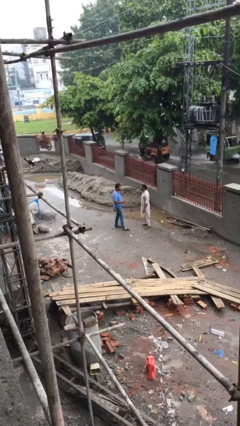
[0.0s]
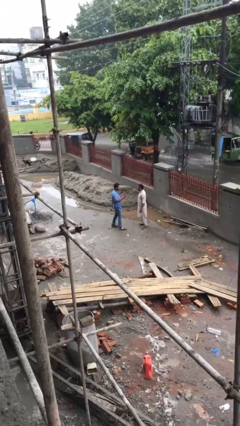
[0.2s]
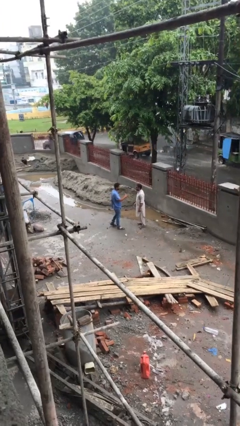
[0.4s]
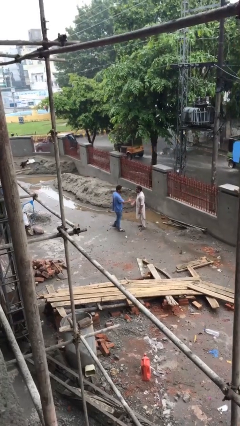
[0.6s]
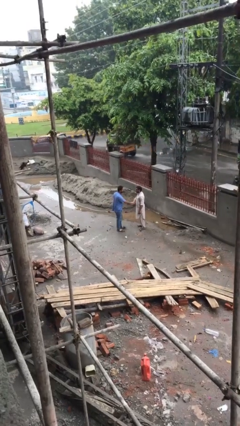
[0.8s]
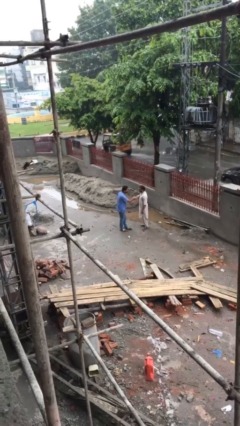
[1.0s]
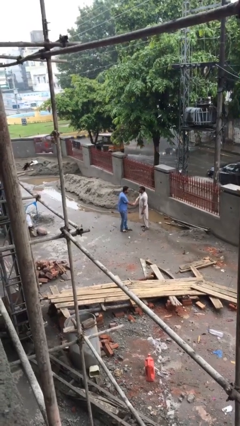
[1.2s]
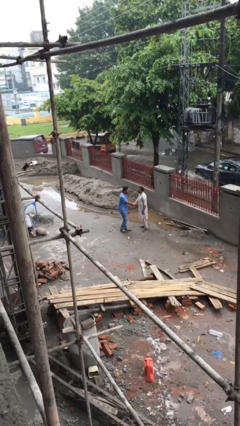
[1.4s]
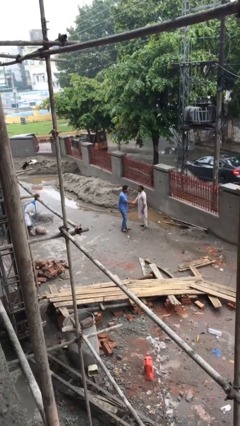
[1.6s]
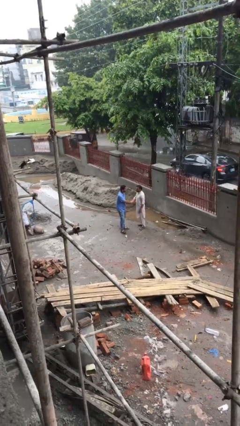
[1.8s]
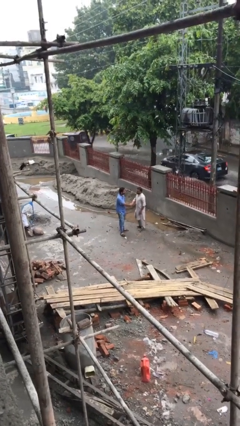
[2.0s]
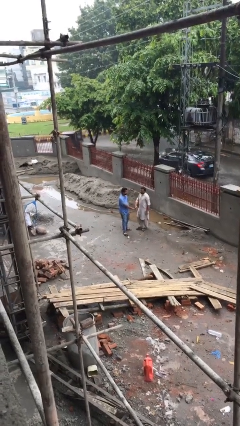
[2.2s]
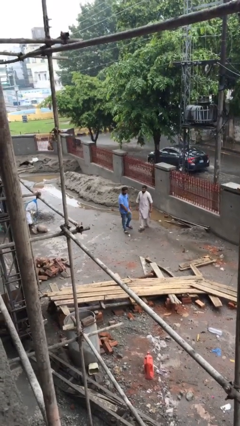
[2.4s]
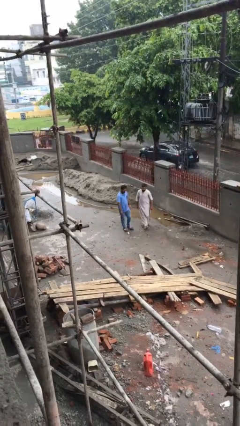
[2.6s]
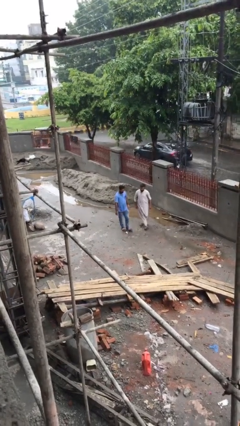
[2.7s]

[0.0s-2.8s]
person shakes hand

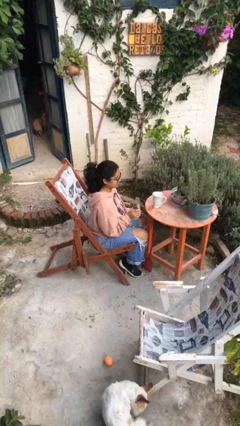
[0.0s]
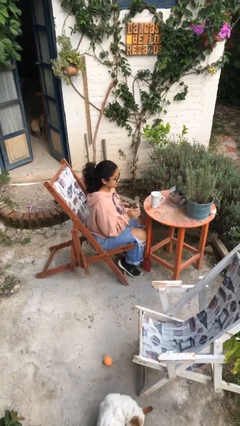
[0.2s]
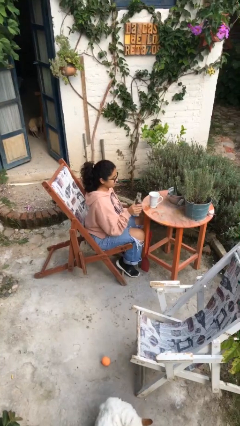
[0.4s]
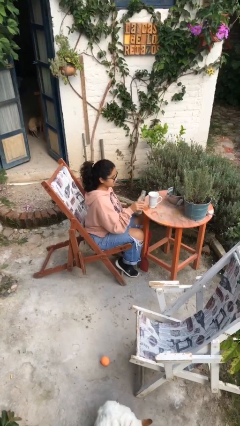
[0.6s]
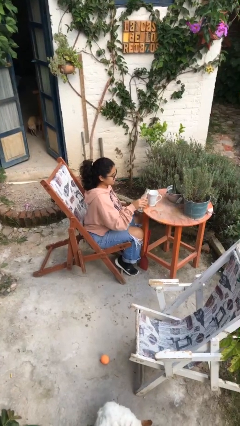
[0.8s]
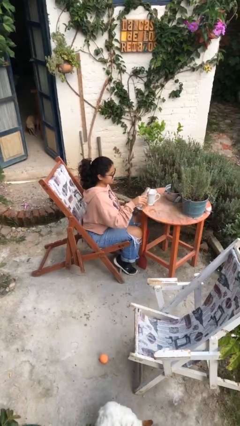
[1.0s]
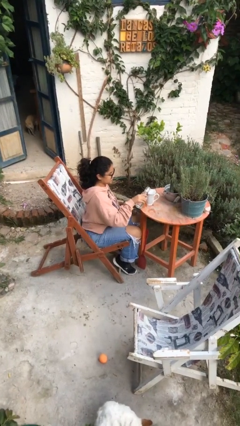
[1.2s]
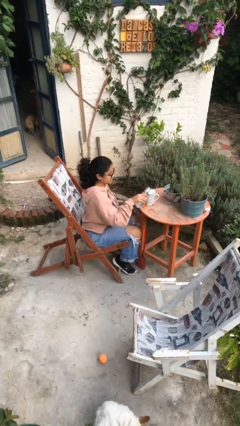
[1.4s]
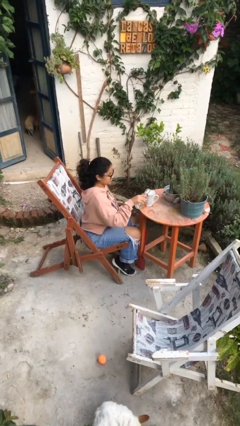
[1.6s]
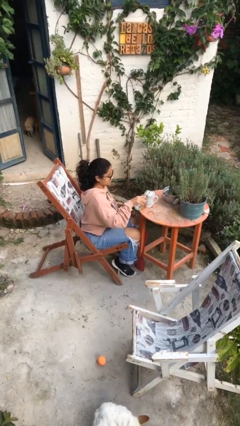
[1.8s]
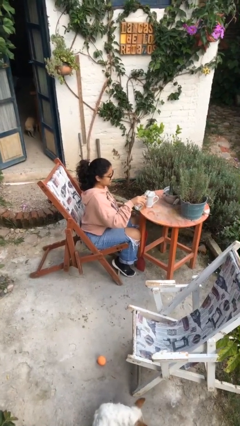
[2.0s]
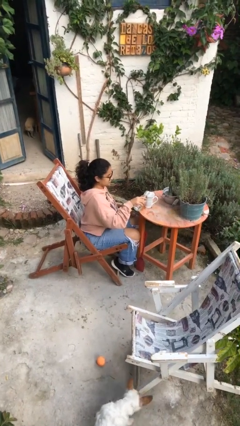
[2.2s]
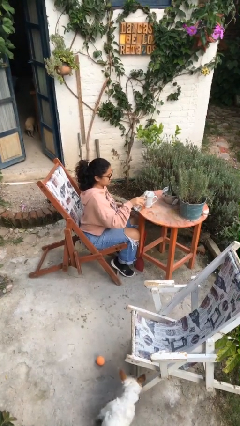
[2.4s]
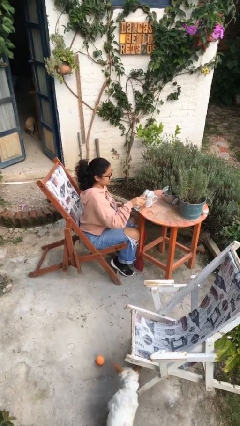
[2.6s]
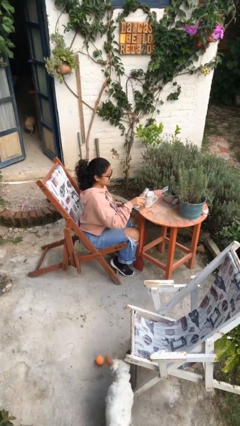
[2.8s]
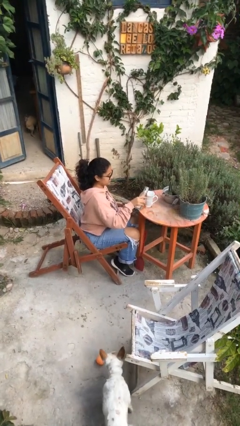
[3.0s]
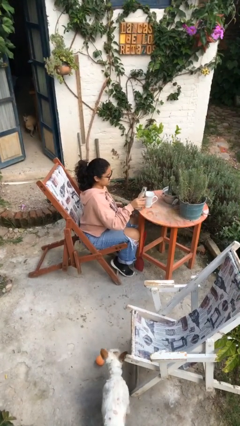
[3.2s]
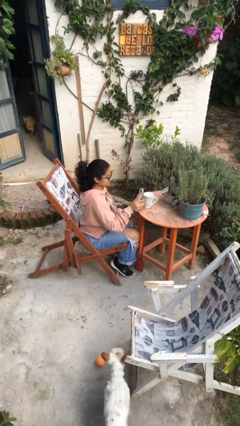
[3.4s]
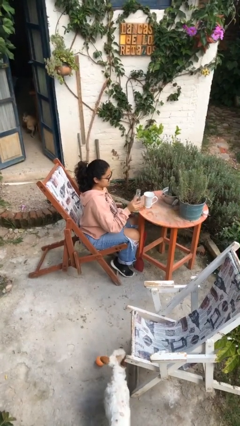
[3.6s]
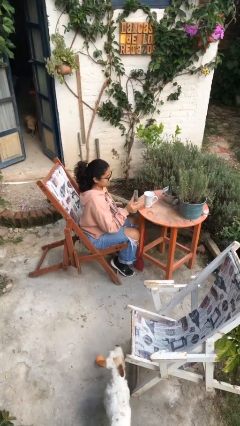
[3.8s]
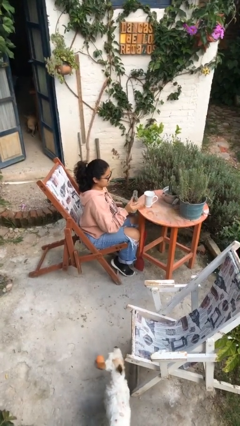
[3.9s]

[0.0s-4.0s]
person pours liquid into cup

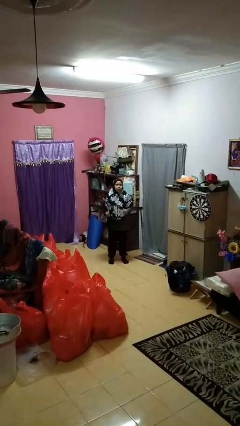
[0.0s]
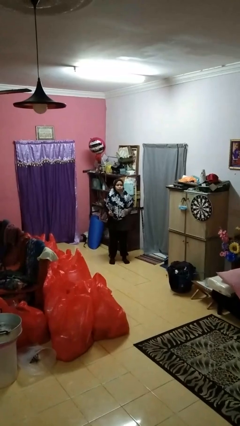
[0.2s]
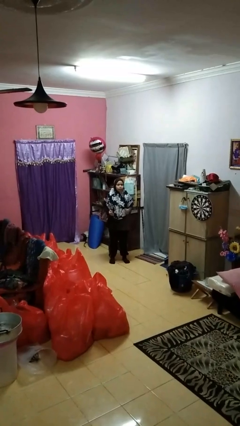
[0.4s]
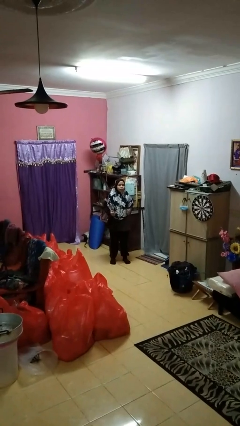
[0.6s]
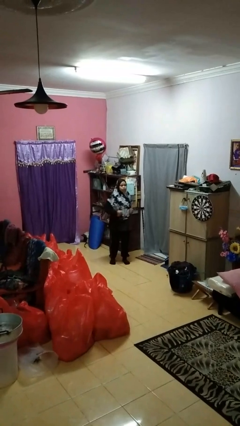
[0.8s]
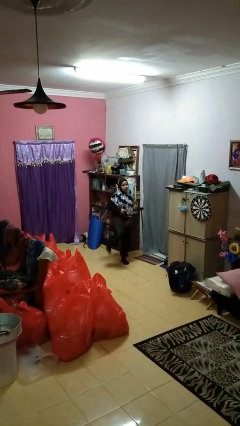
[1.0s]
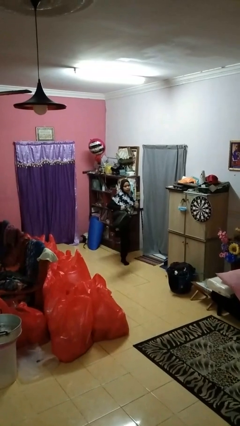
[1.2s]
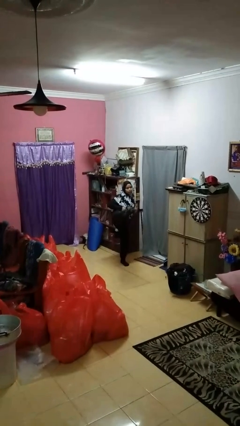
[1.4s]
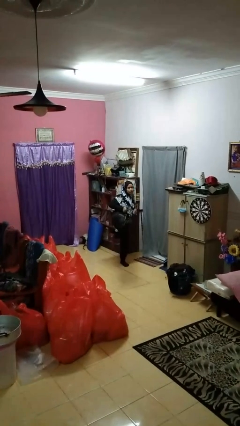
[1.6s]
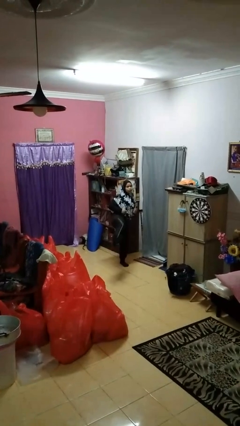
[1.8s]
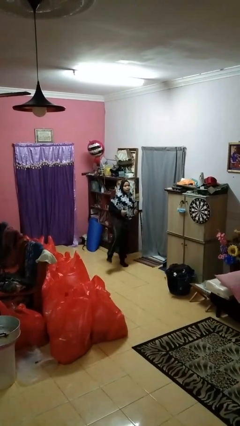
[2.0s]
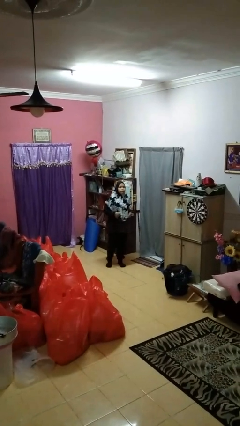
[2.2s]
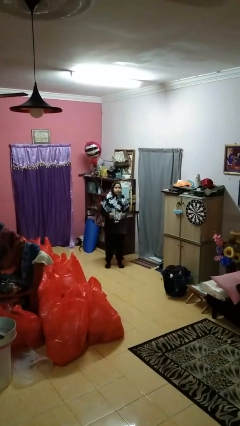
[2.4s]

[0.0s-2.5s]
person karate kicks

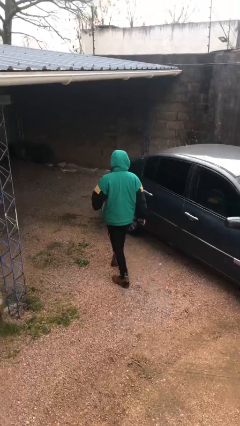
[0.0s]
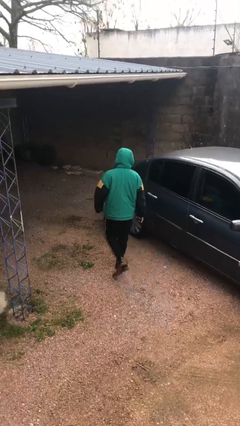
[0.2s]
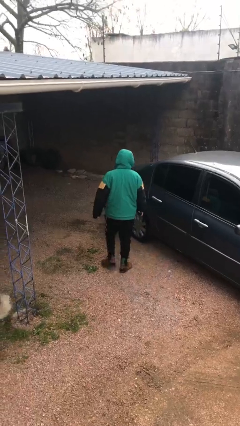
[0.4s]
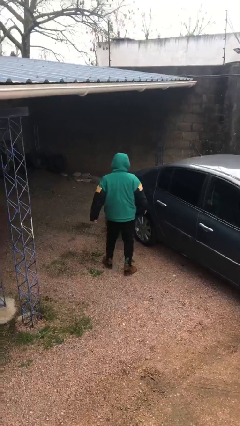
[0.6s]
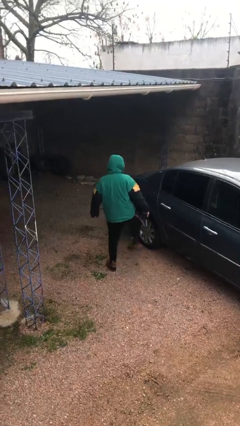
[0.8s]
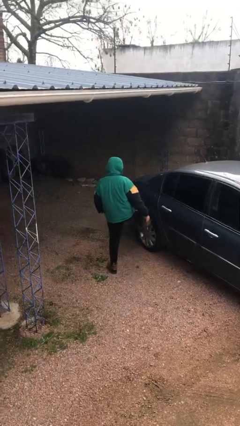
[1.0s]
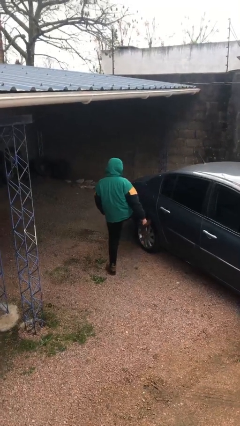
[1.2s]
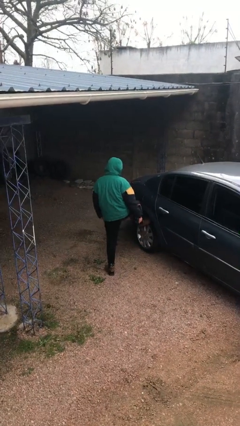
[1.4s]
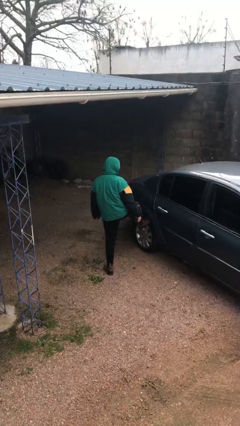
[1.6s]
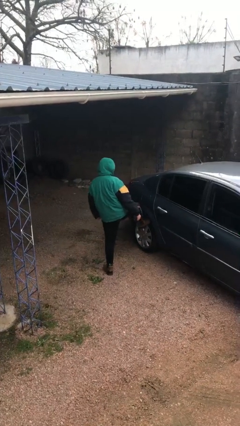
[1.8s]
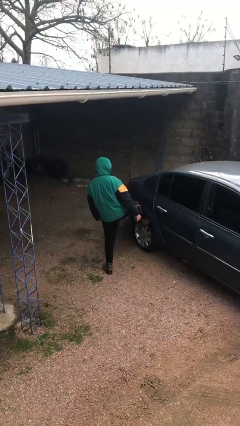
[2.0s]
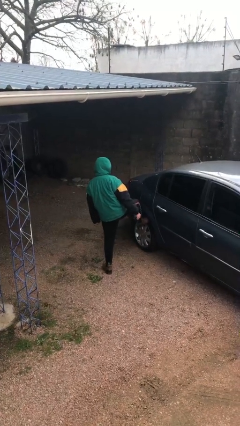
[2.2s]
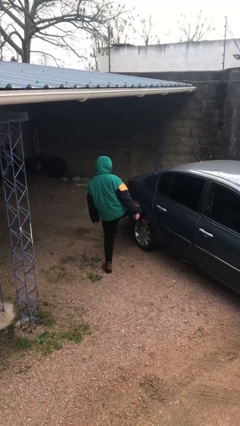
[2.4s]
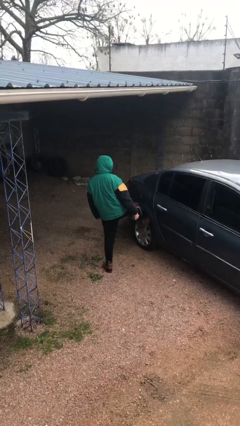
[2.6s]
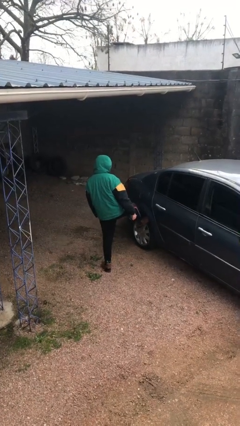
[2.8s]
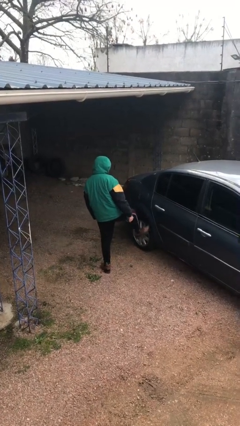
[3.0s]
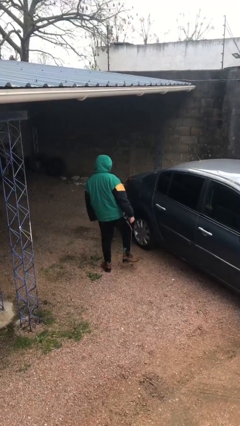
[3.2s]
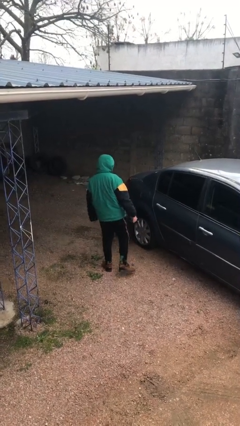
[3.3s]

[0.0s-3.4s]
person kicks car tires

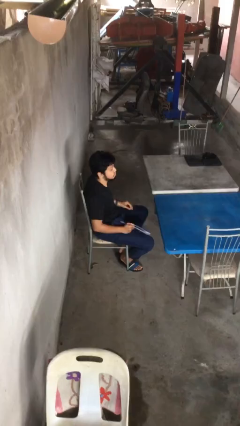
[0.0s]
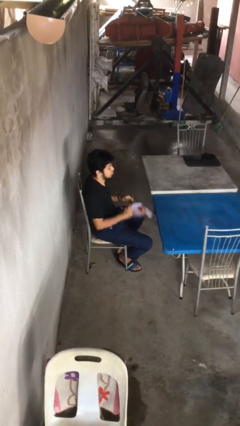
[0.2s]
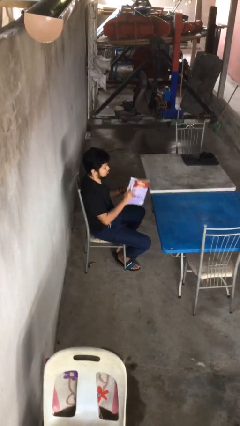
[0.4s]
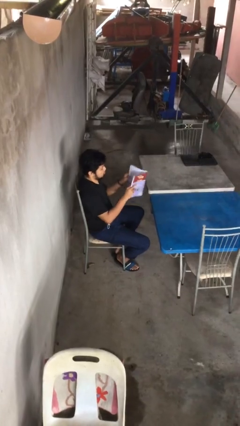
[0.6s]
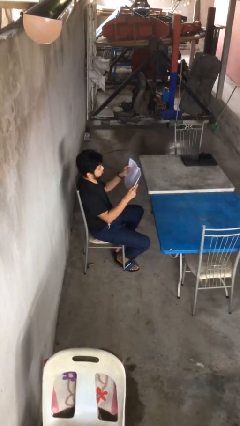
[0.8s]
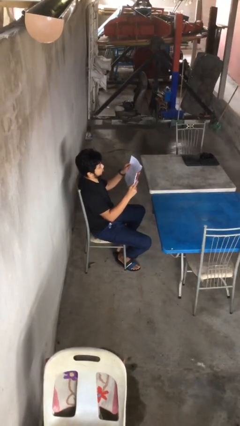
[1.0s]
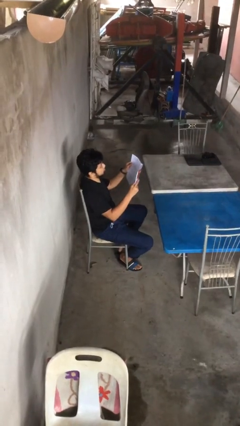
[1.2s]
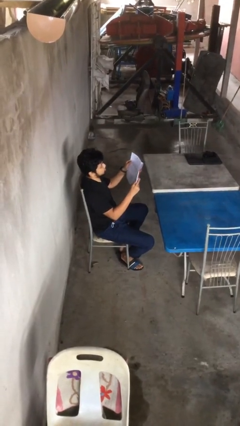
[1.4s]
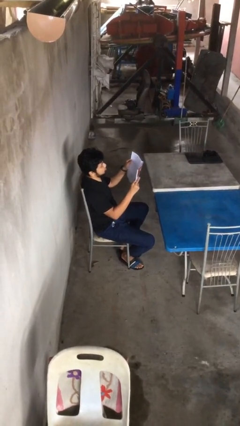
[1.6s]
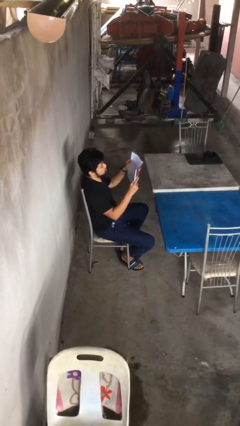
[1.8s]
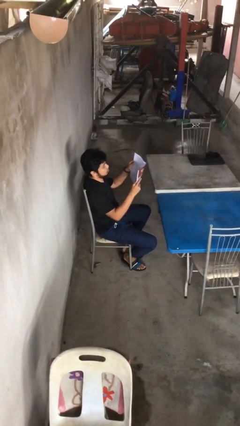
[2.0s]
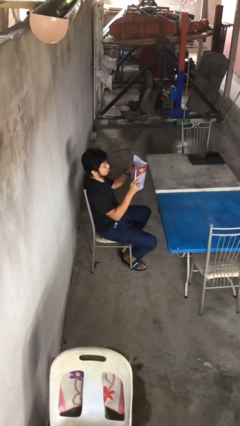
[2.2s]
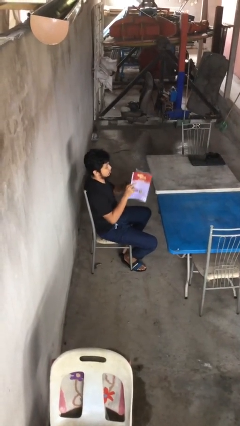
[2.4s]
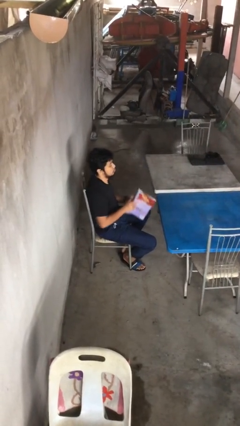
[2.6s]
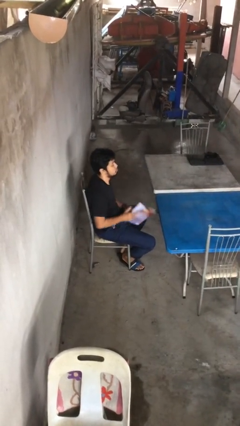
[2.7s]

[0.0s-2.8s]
person reads magazine

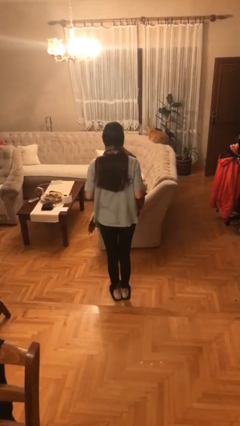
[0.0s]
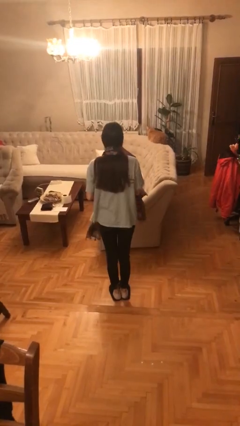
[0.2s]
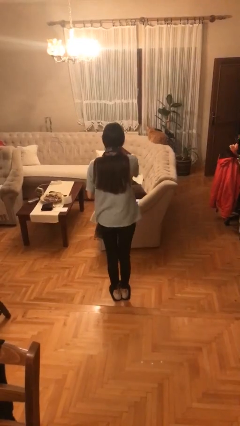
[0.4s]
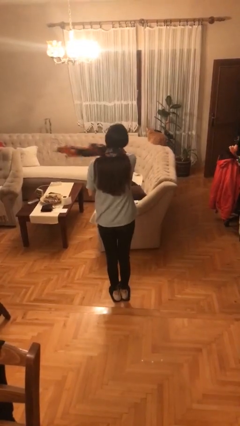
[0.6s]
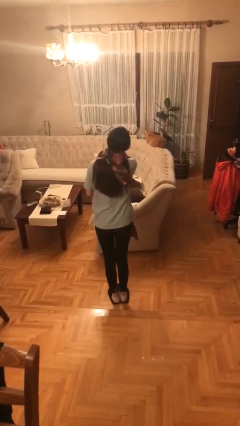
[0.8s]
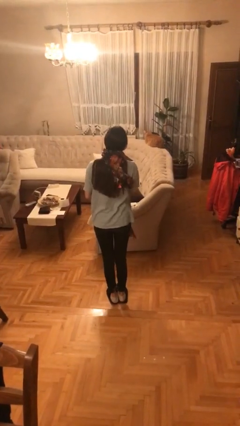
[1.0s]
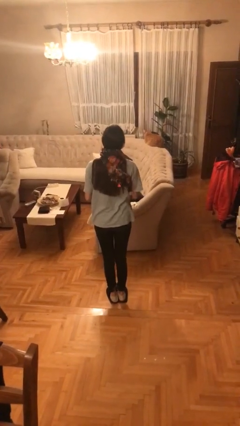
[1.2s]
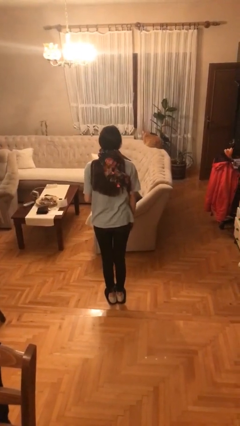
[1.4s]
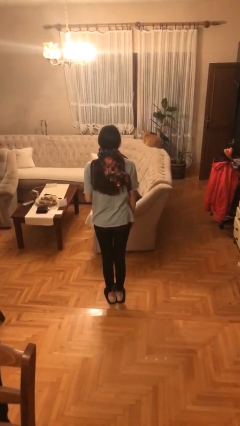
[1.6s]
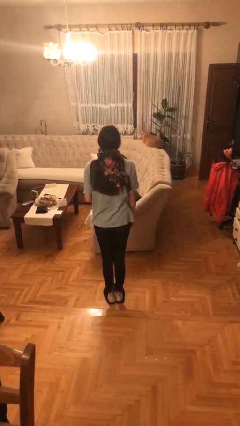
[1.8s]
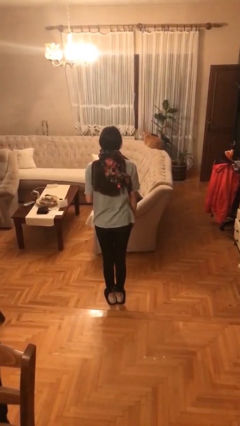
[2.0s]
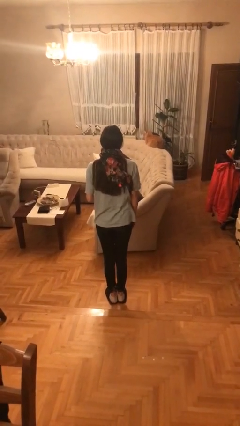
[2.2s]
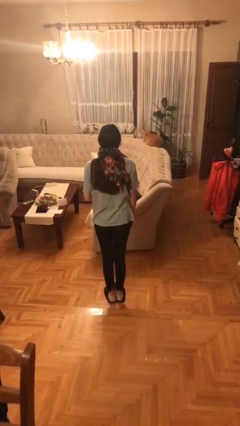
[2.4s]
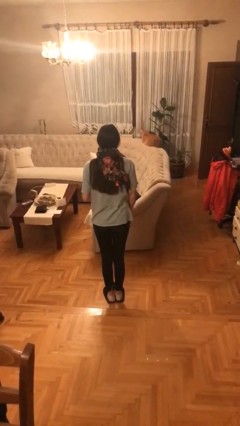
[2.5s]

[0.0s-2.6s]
person puts on scarf
